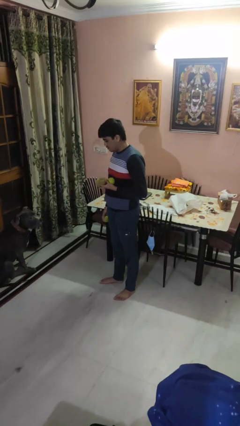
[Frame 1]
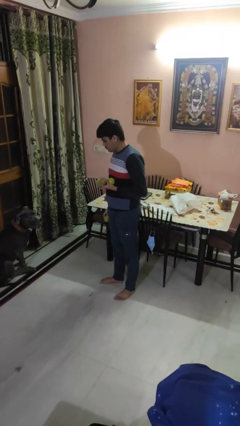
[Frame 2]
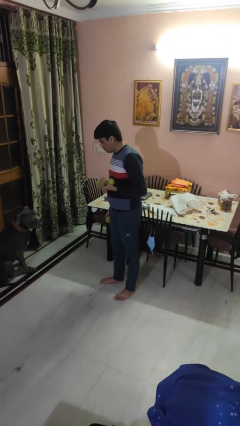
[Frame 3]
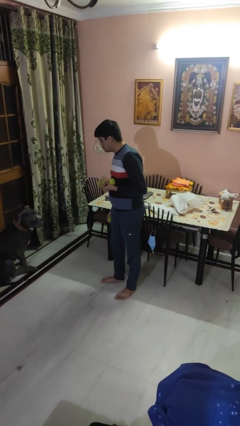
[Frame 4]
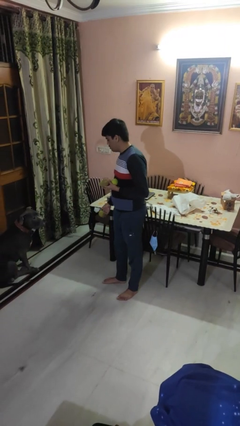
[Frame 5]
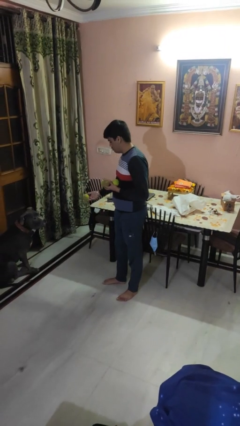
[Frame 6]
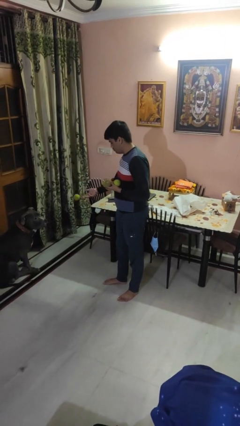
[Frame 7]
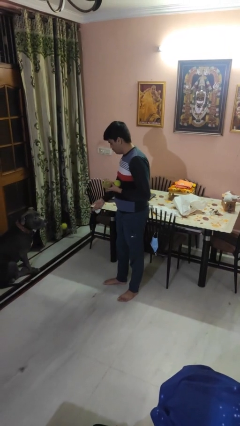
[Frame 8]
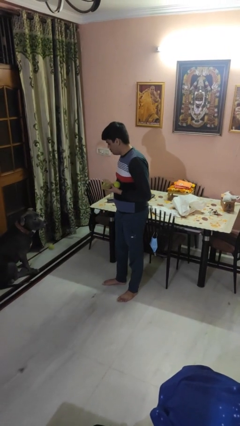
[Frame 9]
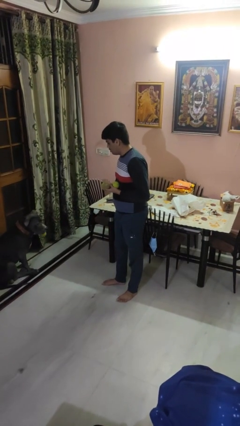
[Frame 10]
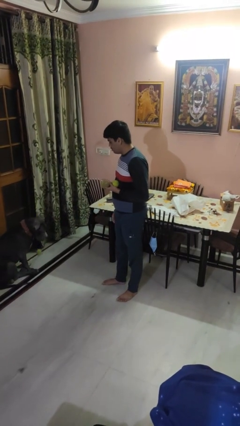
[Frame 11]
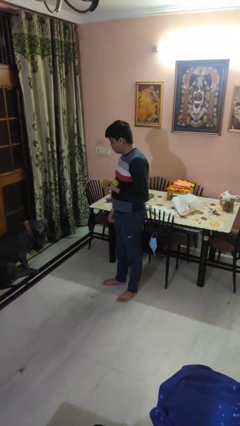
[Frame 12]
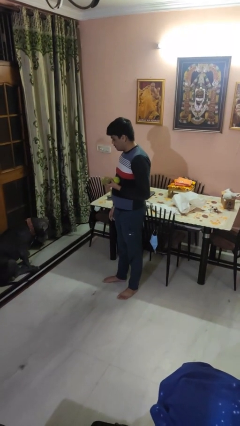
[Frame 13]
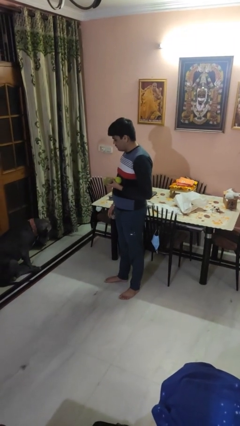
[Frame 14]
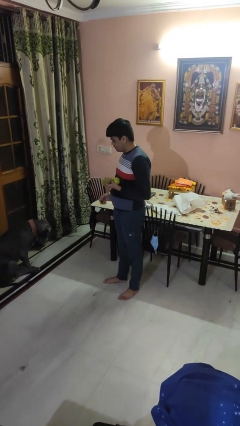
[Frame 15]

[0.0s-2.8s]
person throws object to dog

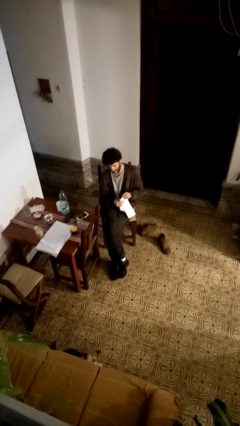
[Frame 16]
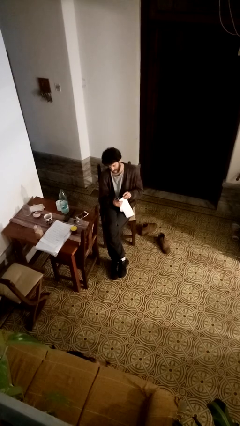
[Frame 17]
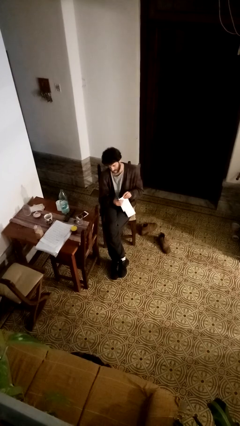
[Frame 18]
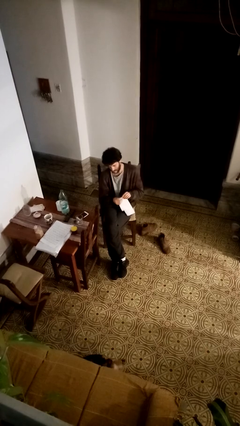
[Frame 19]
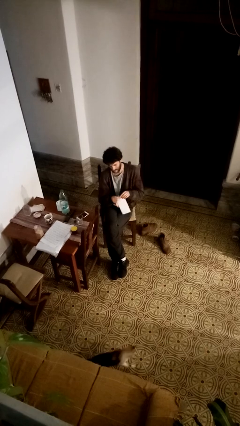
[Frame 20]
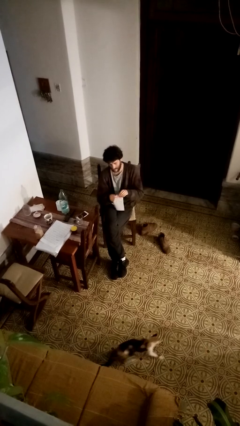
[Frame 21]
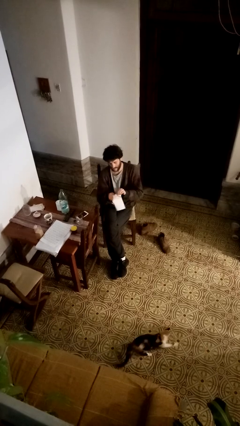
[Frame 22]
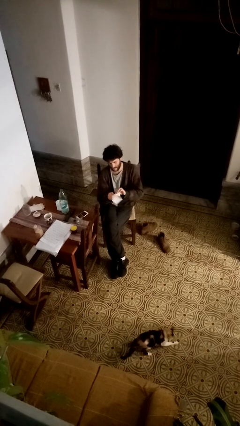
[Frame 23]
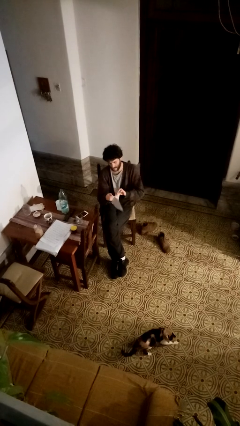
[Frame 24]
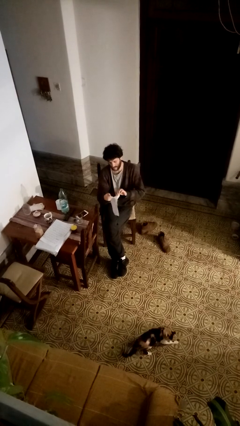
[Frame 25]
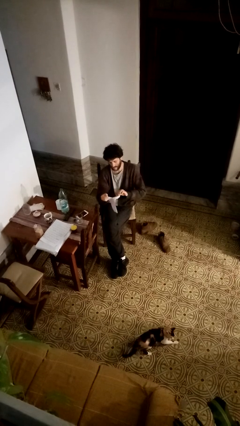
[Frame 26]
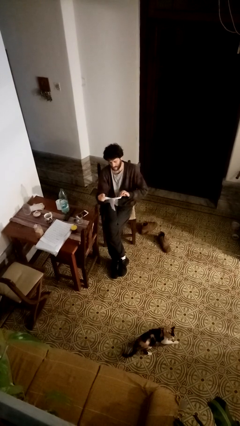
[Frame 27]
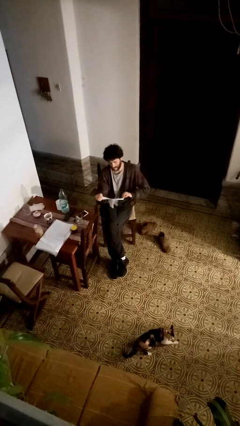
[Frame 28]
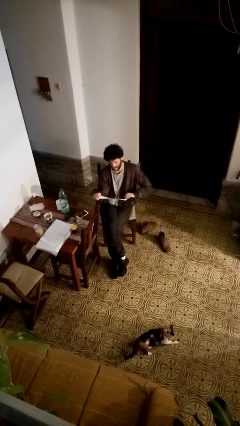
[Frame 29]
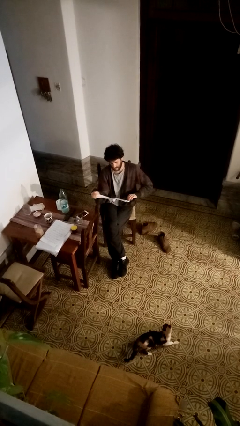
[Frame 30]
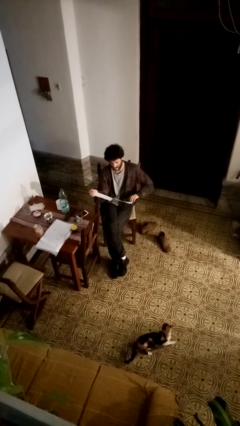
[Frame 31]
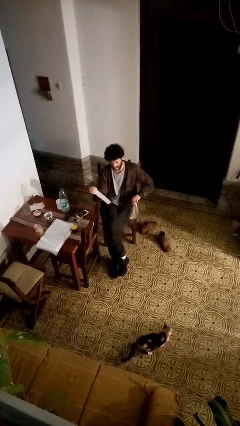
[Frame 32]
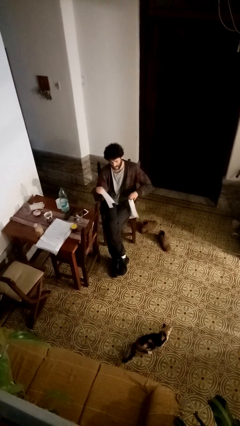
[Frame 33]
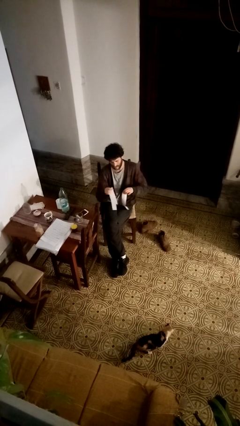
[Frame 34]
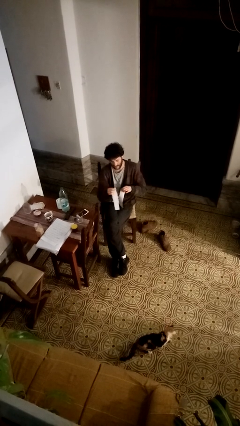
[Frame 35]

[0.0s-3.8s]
person tears paper

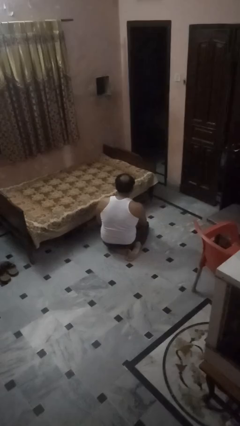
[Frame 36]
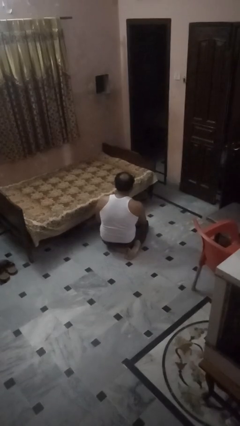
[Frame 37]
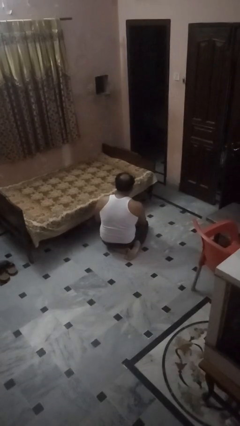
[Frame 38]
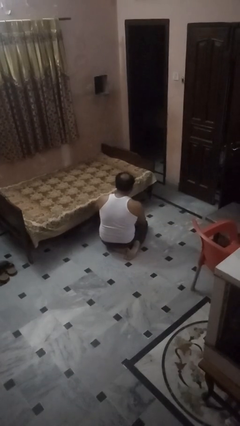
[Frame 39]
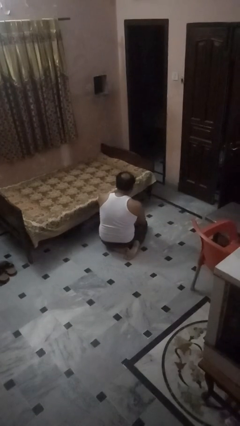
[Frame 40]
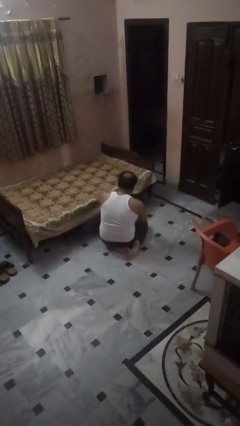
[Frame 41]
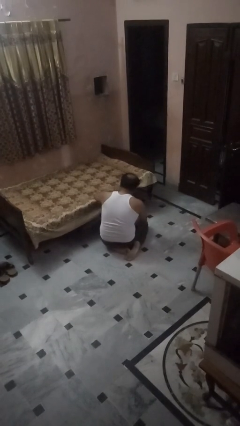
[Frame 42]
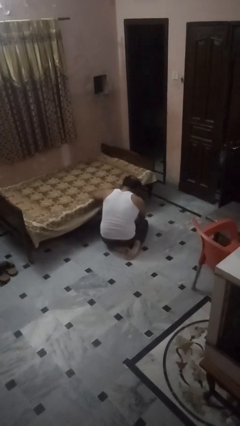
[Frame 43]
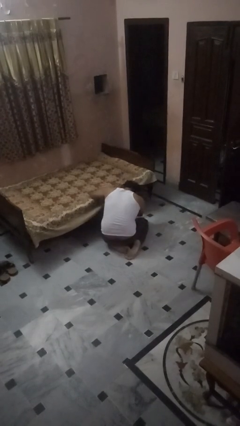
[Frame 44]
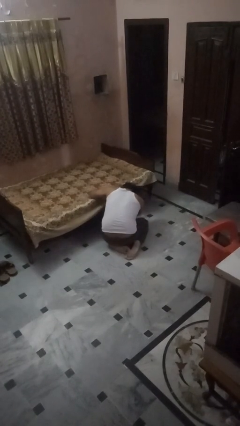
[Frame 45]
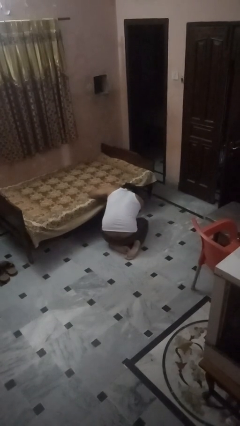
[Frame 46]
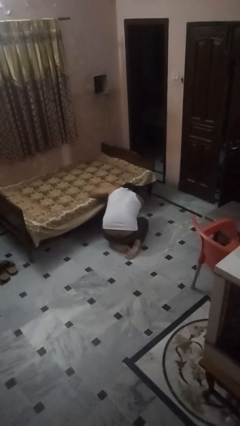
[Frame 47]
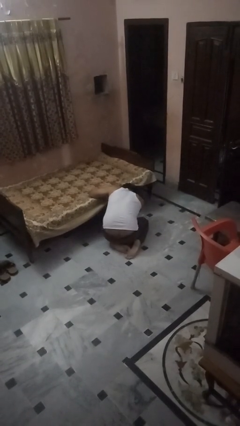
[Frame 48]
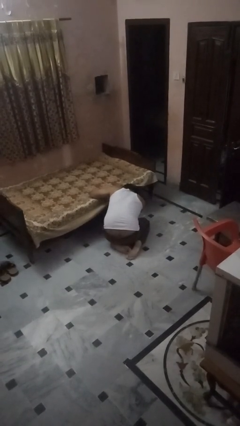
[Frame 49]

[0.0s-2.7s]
person searches under bed

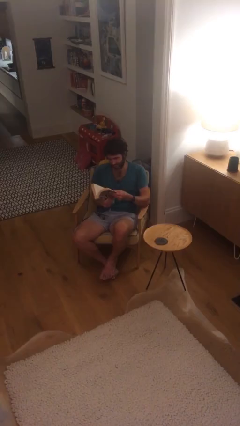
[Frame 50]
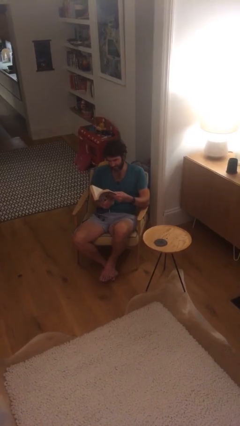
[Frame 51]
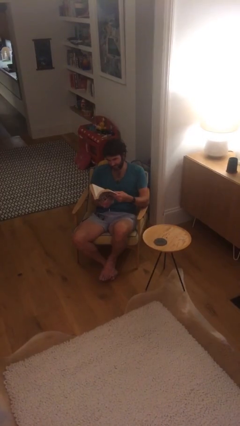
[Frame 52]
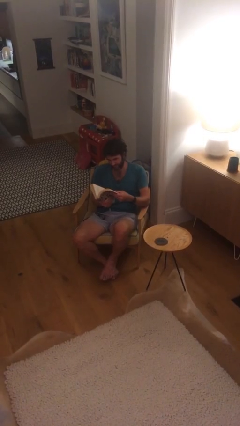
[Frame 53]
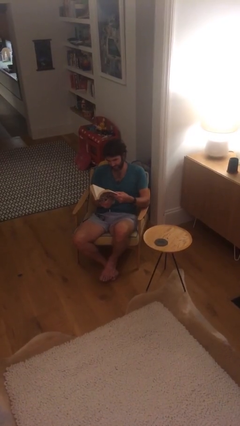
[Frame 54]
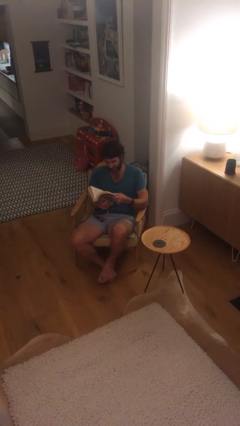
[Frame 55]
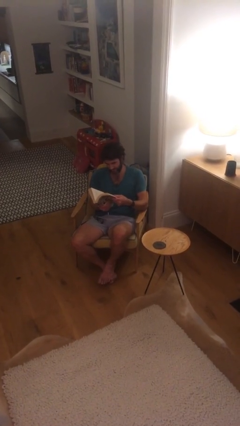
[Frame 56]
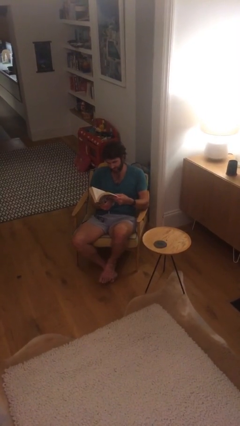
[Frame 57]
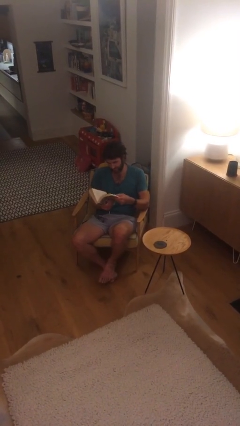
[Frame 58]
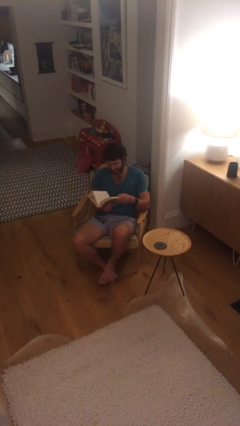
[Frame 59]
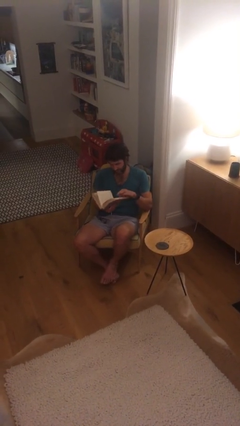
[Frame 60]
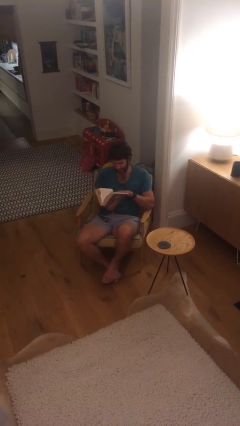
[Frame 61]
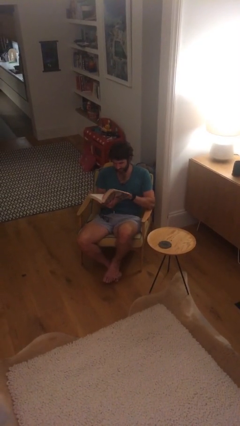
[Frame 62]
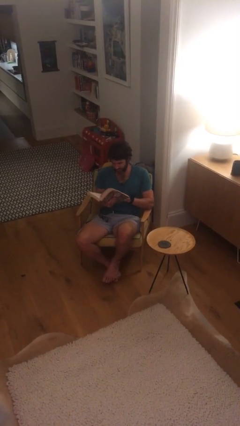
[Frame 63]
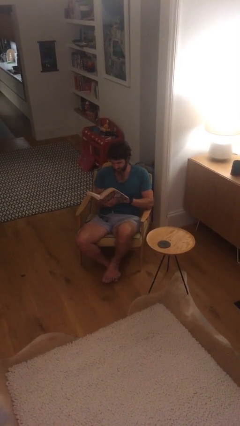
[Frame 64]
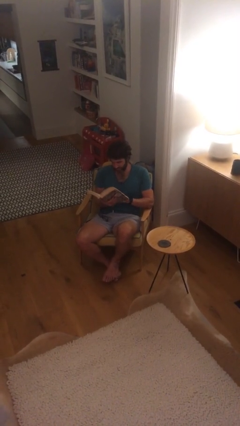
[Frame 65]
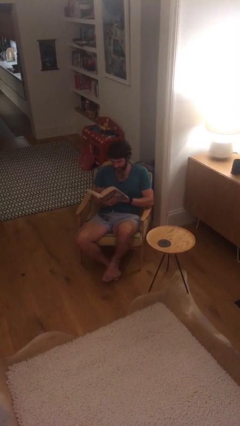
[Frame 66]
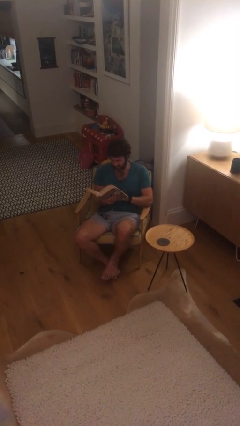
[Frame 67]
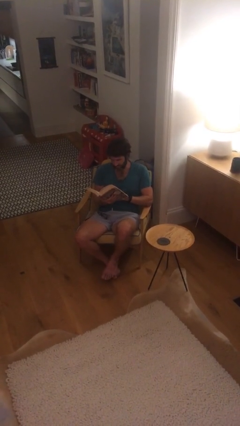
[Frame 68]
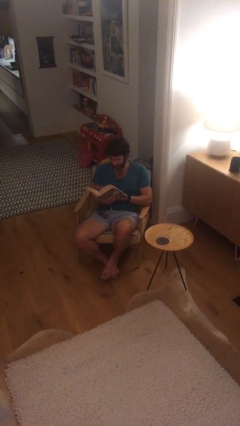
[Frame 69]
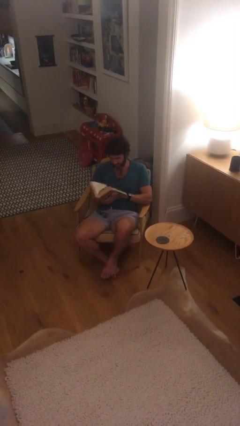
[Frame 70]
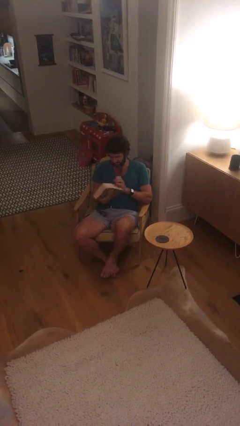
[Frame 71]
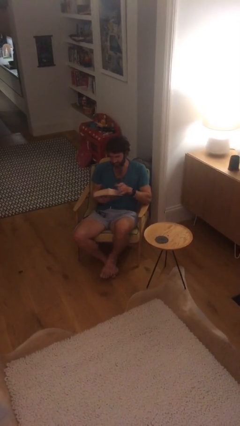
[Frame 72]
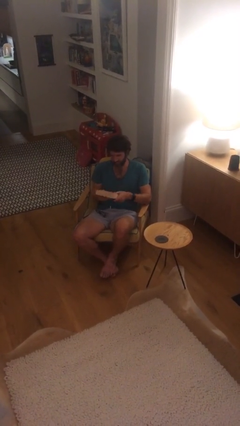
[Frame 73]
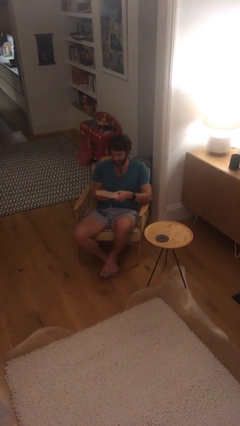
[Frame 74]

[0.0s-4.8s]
person reads document

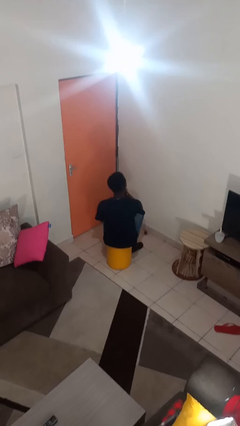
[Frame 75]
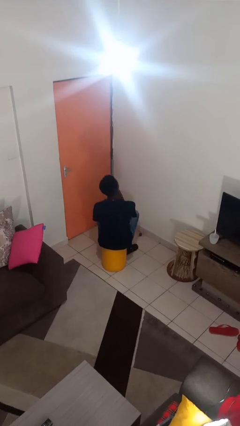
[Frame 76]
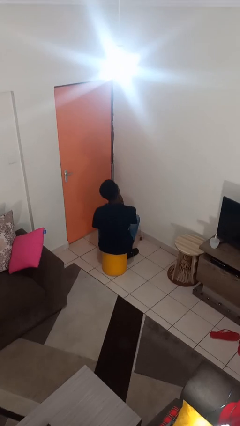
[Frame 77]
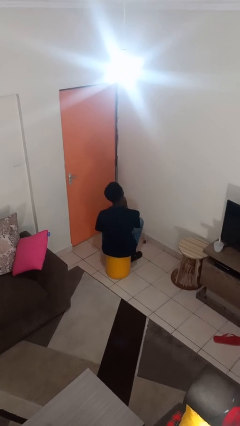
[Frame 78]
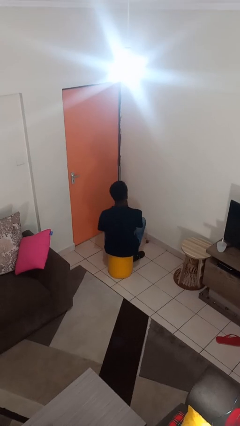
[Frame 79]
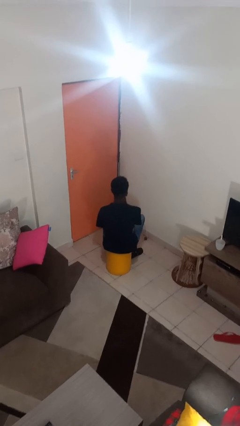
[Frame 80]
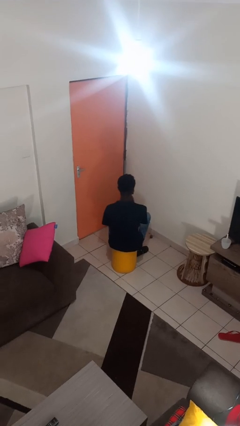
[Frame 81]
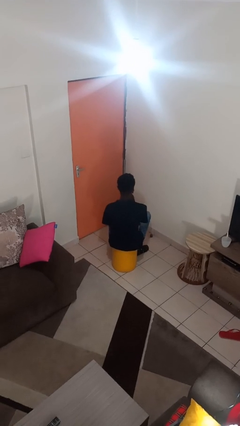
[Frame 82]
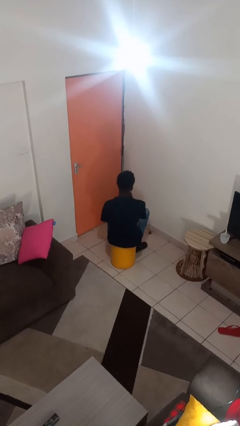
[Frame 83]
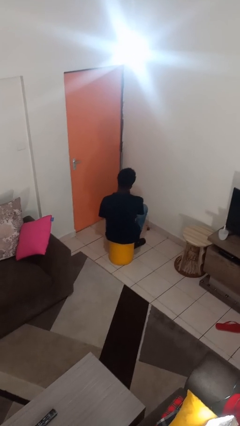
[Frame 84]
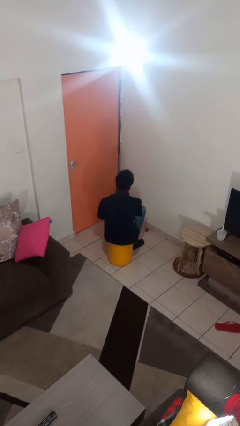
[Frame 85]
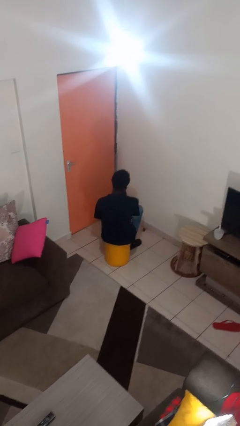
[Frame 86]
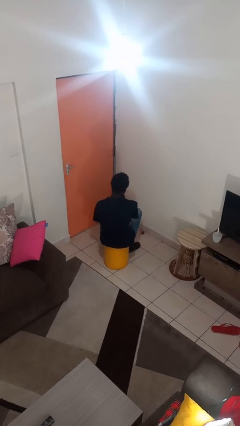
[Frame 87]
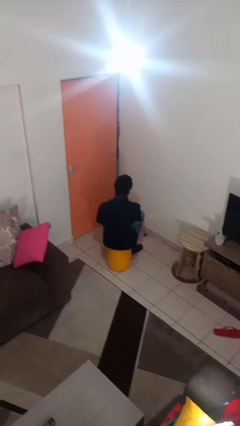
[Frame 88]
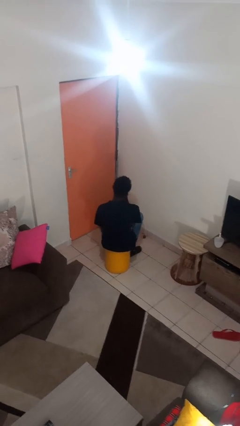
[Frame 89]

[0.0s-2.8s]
person strokes chin

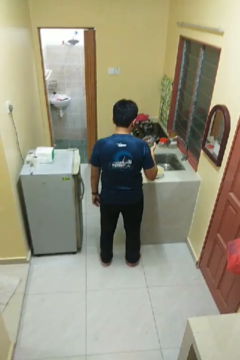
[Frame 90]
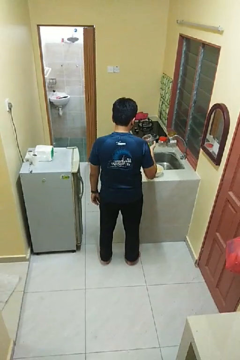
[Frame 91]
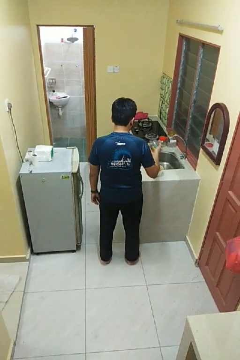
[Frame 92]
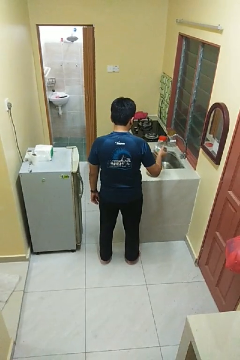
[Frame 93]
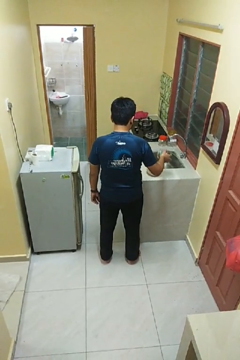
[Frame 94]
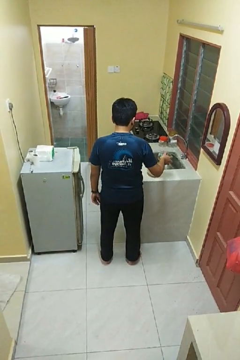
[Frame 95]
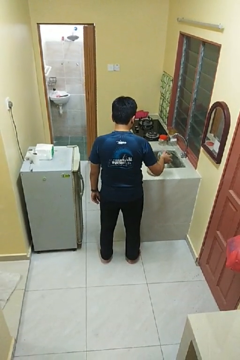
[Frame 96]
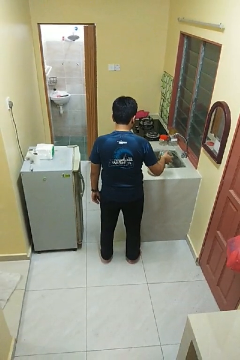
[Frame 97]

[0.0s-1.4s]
person pours into bowl
